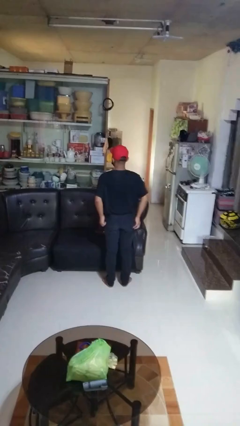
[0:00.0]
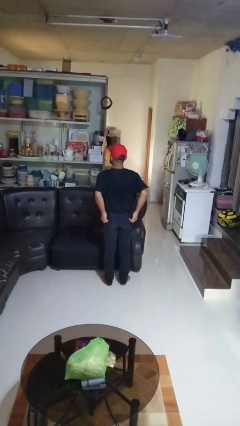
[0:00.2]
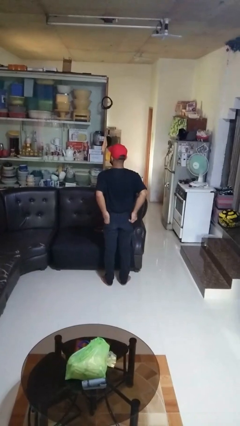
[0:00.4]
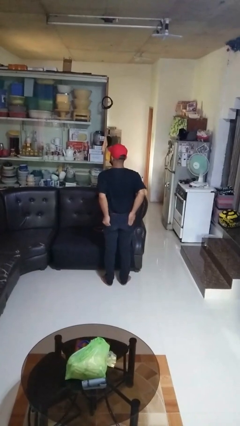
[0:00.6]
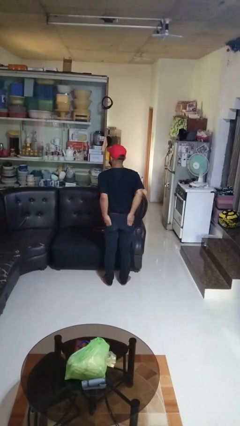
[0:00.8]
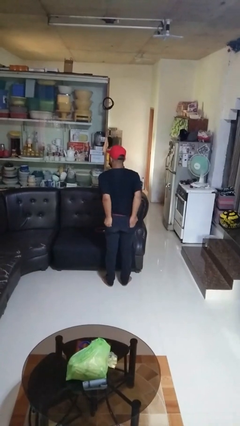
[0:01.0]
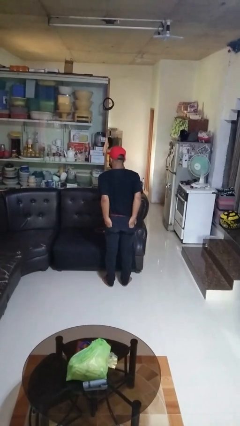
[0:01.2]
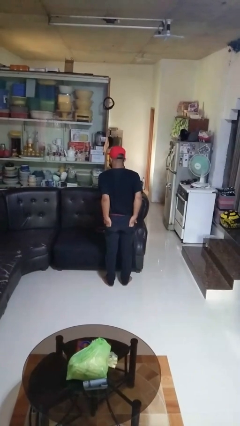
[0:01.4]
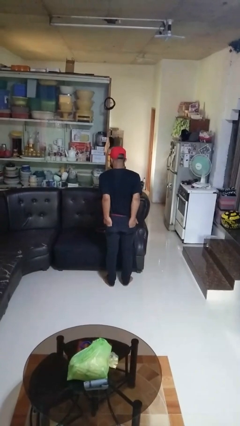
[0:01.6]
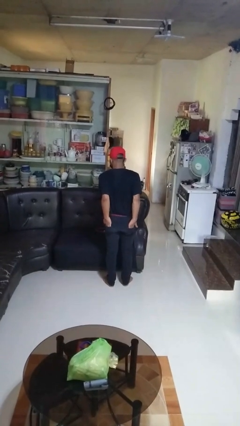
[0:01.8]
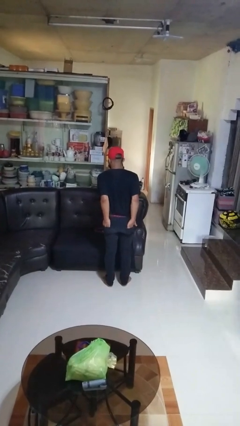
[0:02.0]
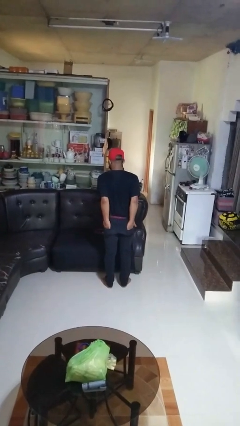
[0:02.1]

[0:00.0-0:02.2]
person puts hands in back pockets

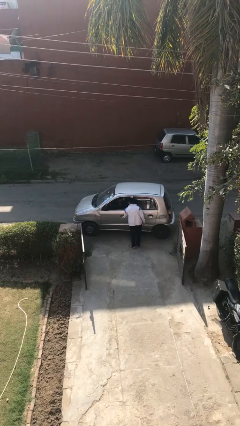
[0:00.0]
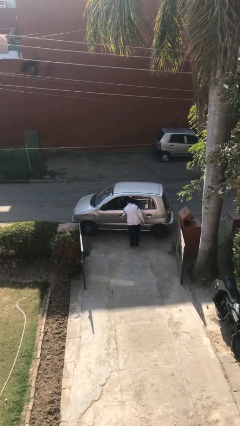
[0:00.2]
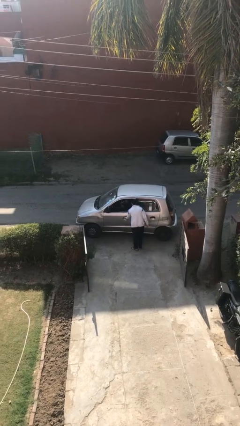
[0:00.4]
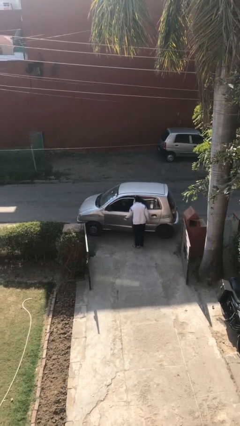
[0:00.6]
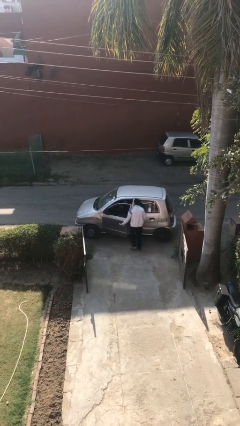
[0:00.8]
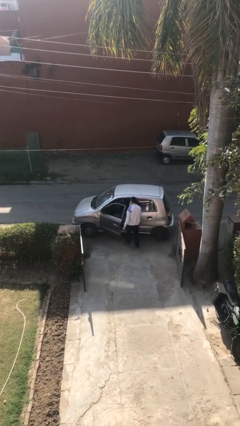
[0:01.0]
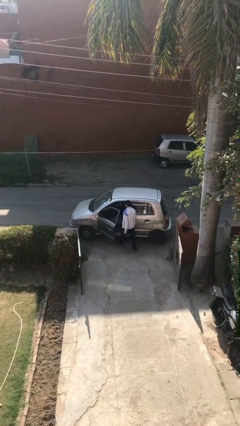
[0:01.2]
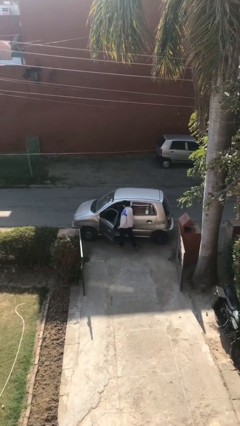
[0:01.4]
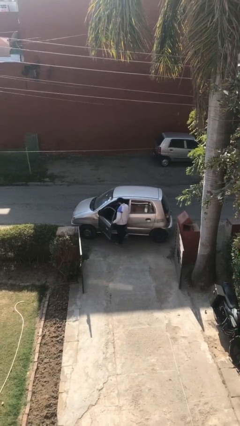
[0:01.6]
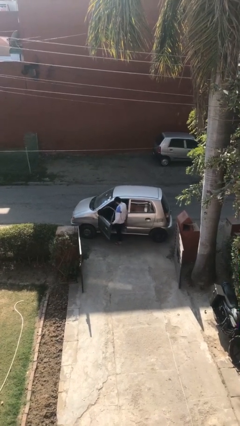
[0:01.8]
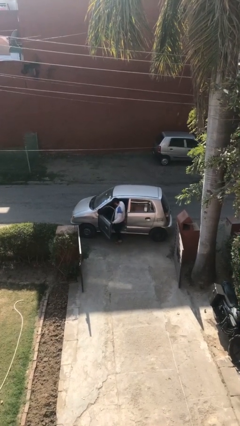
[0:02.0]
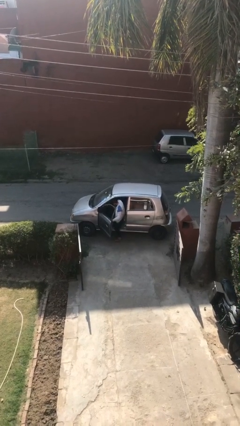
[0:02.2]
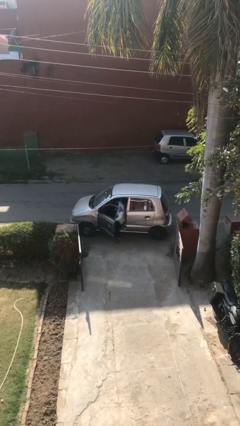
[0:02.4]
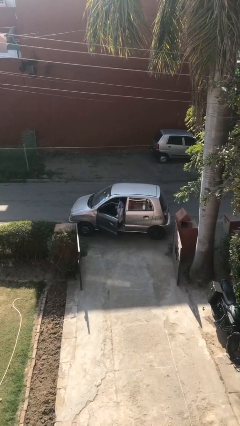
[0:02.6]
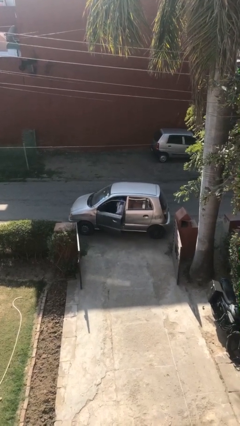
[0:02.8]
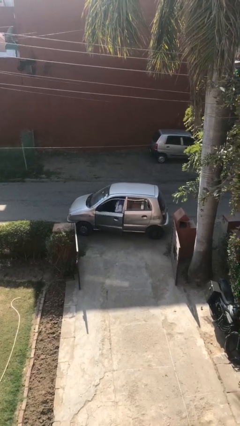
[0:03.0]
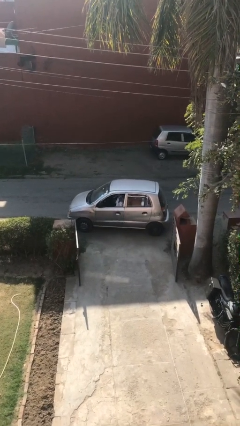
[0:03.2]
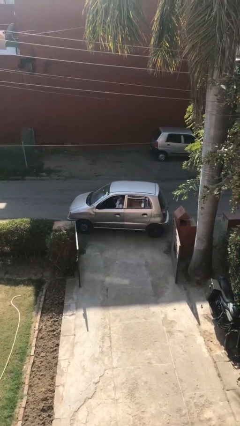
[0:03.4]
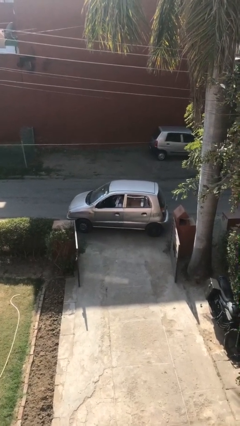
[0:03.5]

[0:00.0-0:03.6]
car picks up person

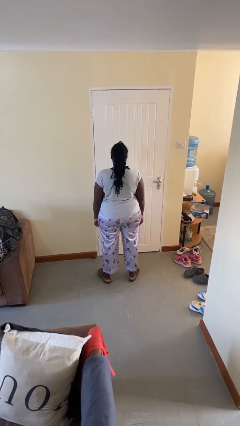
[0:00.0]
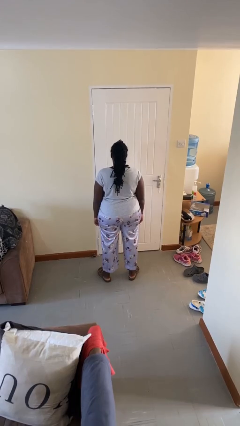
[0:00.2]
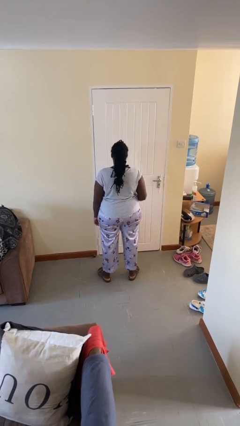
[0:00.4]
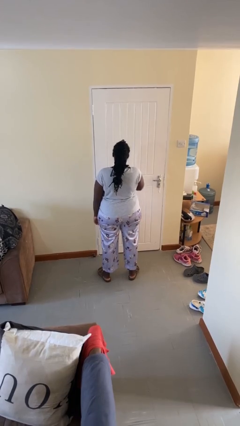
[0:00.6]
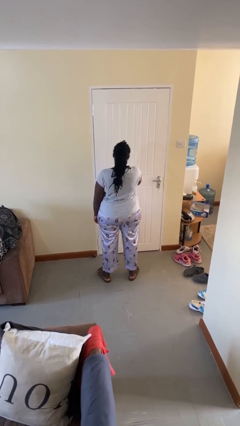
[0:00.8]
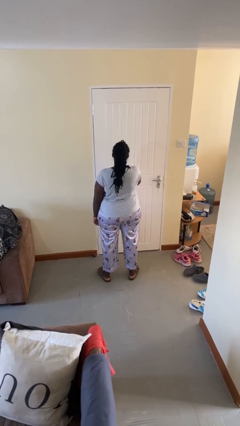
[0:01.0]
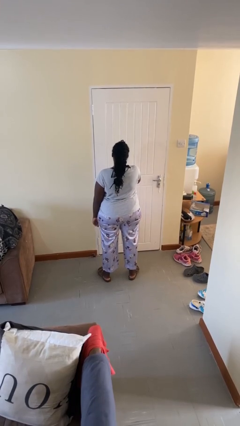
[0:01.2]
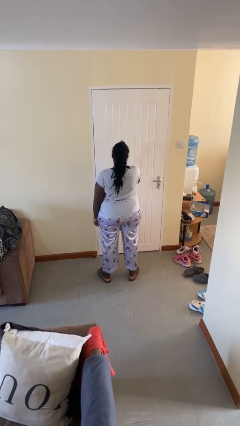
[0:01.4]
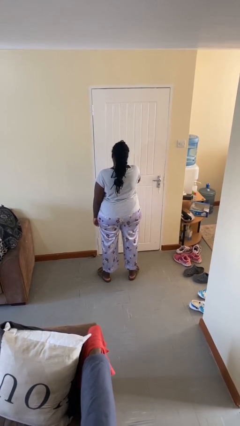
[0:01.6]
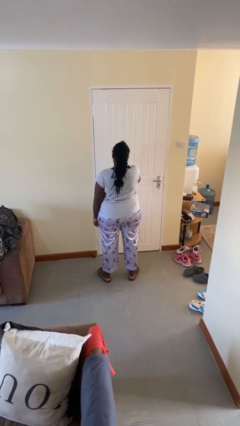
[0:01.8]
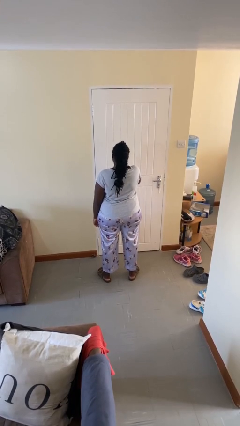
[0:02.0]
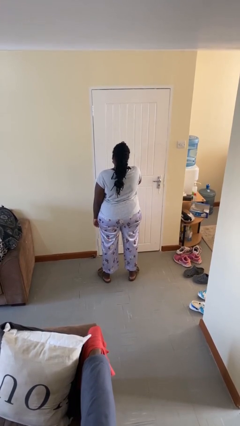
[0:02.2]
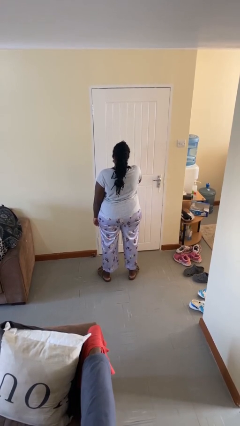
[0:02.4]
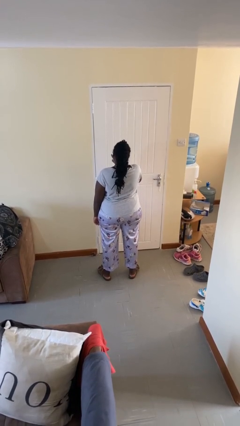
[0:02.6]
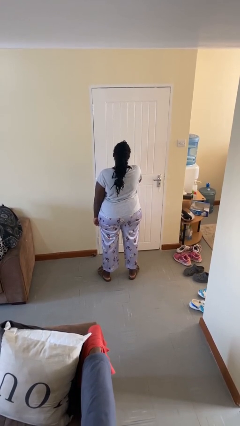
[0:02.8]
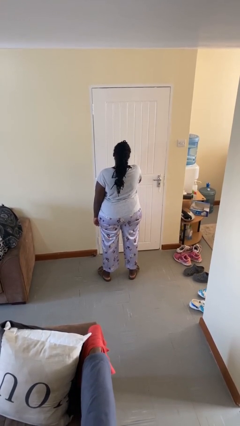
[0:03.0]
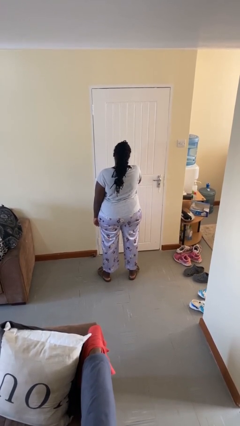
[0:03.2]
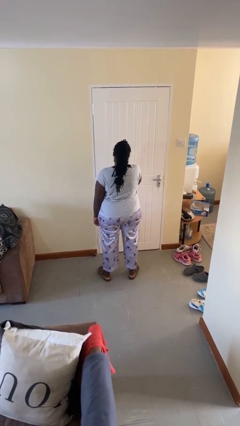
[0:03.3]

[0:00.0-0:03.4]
person scratches face

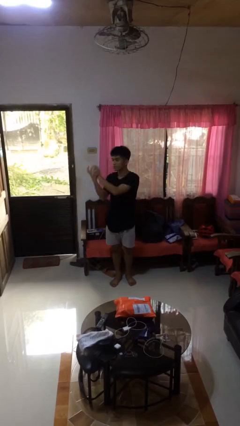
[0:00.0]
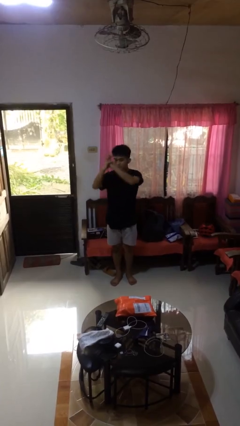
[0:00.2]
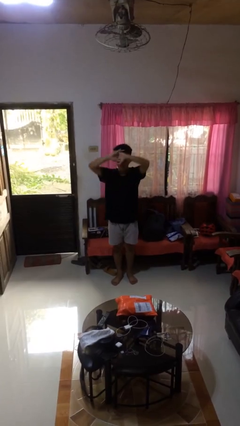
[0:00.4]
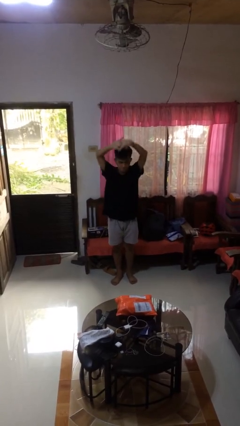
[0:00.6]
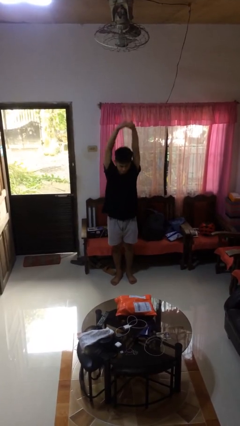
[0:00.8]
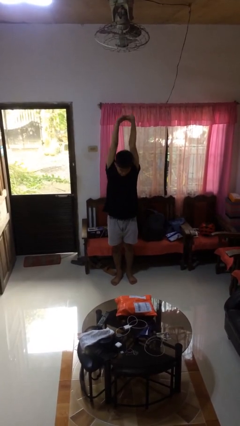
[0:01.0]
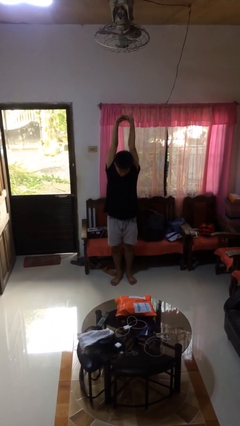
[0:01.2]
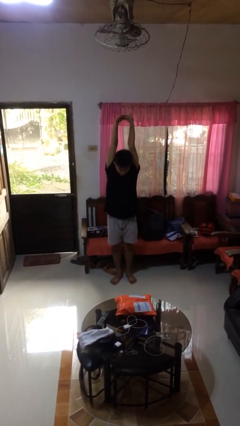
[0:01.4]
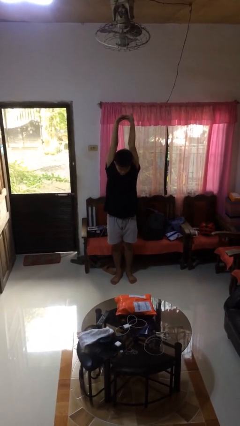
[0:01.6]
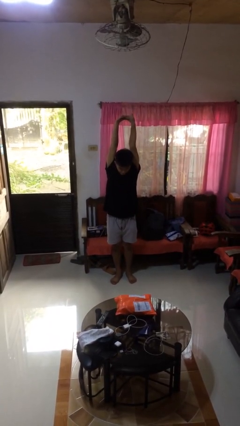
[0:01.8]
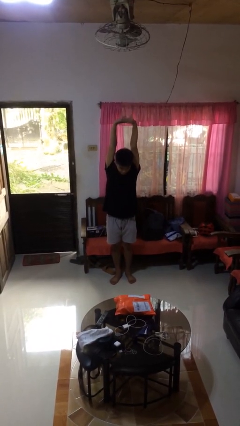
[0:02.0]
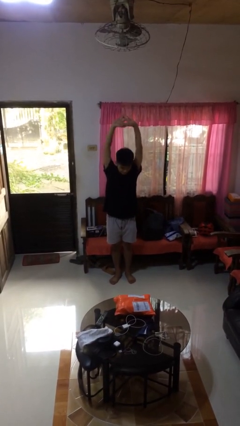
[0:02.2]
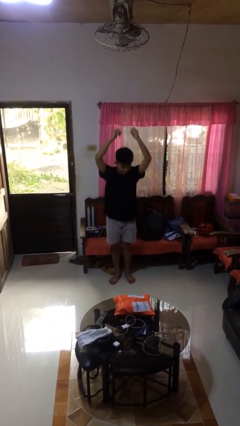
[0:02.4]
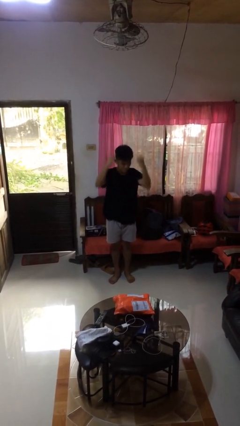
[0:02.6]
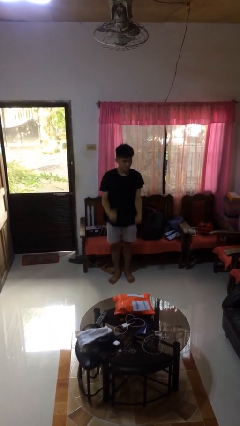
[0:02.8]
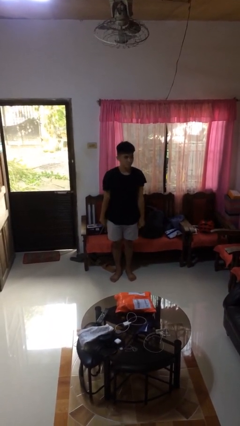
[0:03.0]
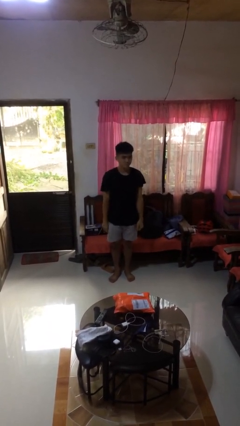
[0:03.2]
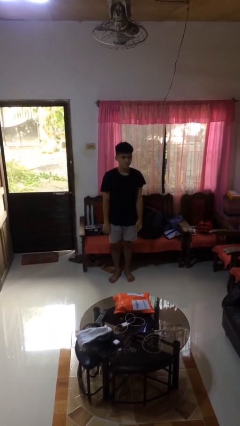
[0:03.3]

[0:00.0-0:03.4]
person stretches arms over head

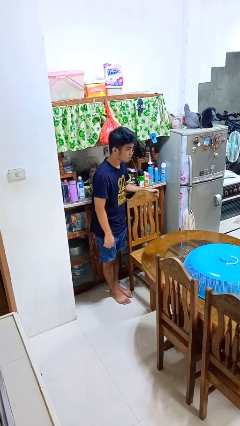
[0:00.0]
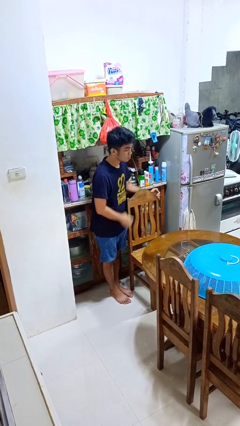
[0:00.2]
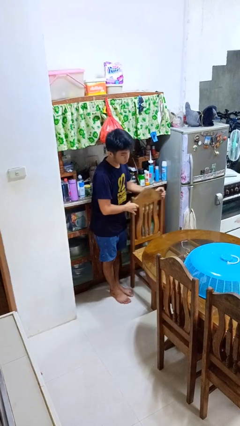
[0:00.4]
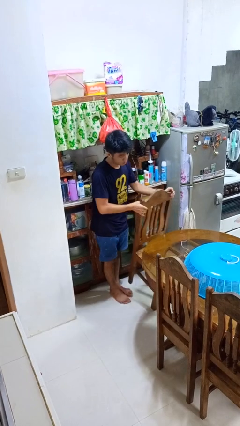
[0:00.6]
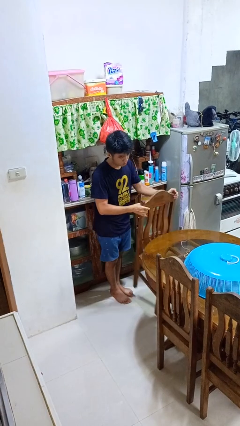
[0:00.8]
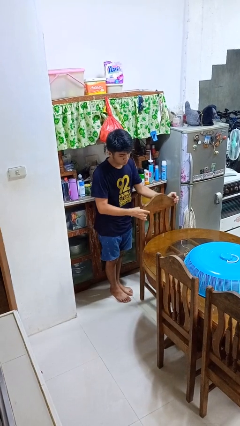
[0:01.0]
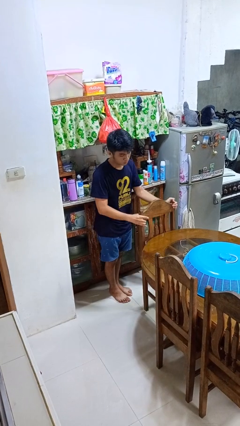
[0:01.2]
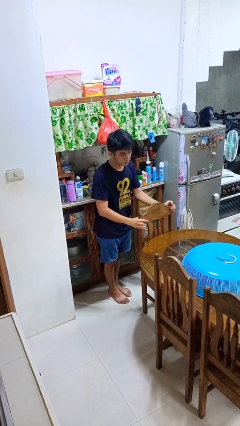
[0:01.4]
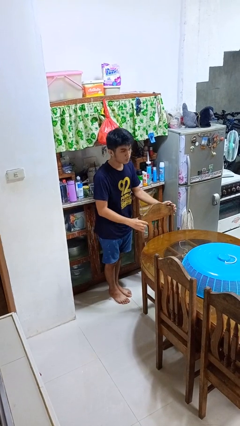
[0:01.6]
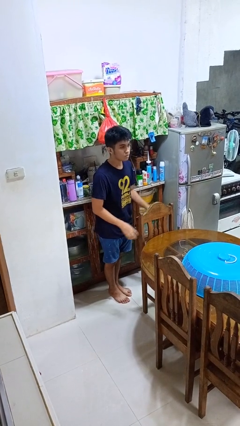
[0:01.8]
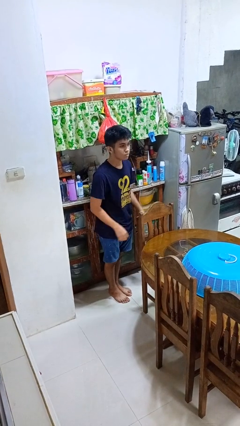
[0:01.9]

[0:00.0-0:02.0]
person pushes in chair

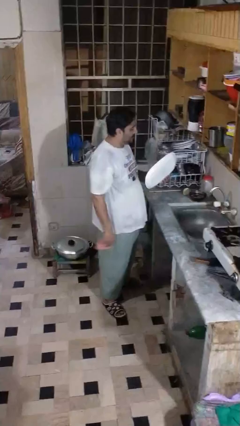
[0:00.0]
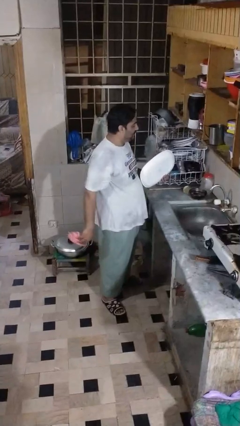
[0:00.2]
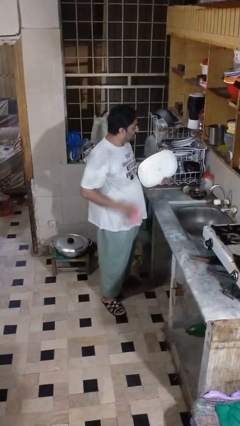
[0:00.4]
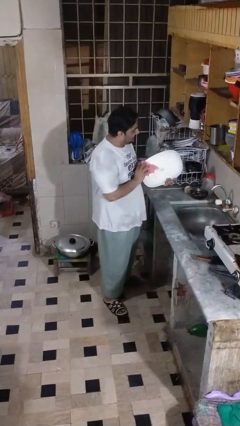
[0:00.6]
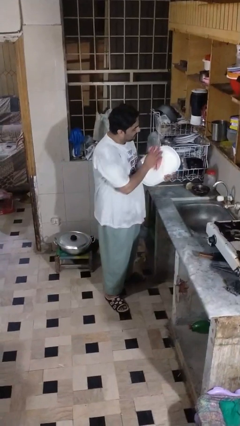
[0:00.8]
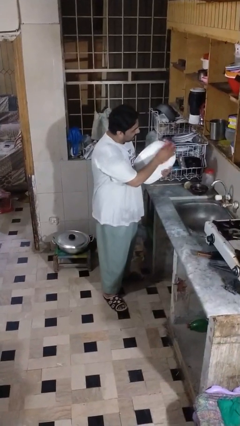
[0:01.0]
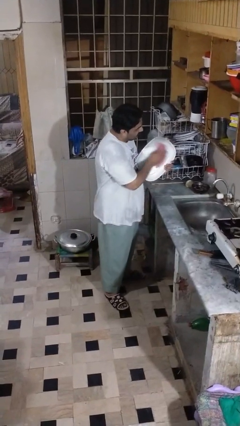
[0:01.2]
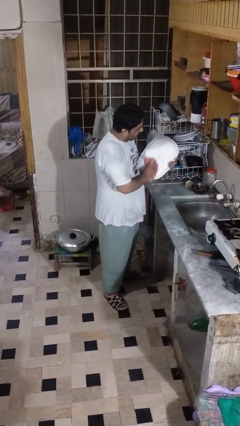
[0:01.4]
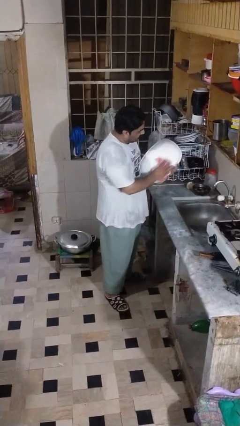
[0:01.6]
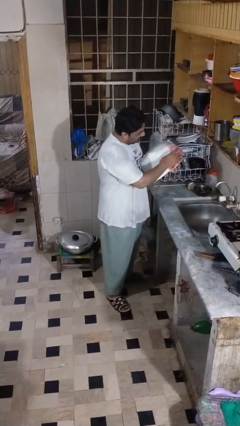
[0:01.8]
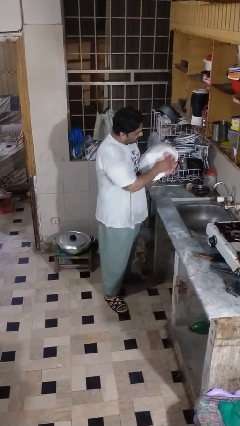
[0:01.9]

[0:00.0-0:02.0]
person dries dish

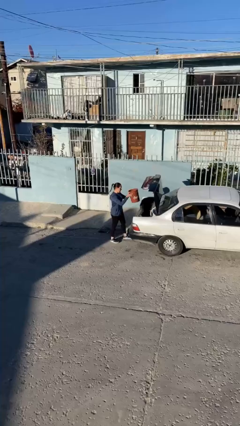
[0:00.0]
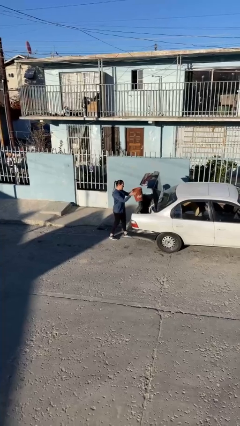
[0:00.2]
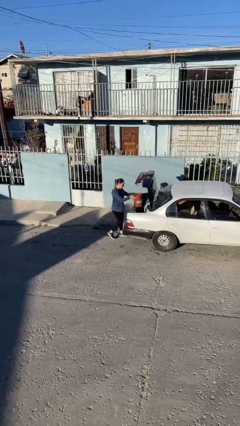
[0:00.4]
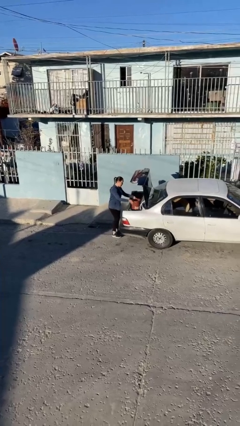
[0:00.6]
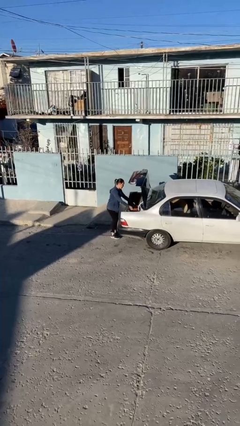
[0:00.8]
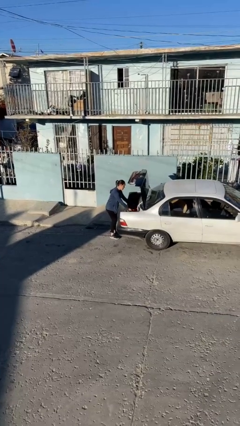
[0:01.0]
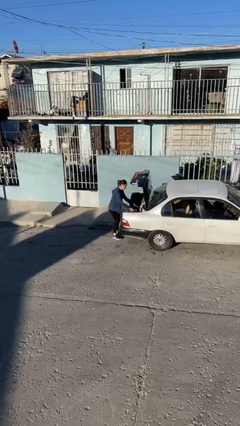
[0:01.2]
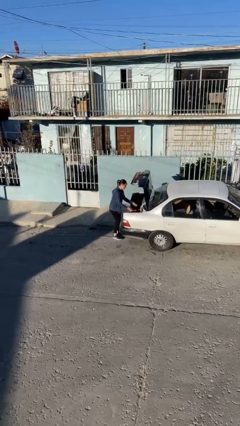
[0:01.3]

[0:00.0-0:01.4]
person loads car
